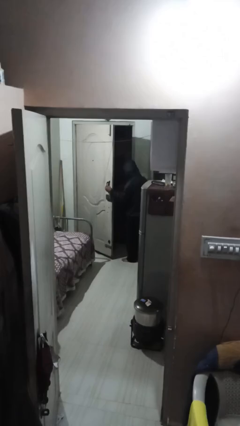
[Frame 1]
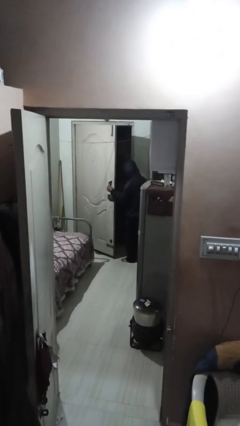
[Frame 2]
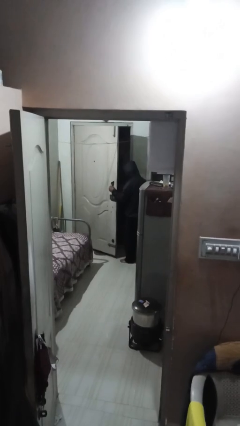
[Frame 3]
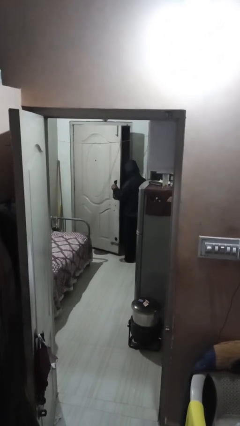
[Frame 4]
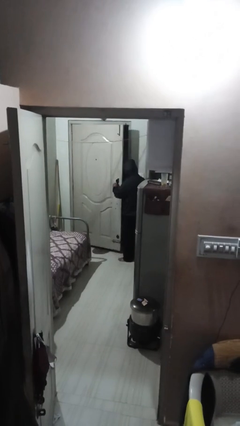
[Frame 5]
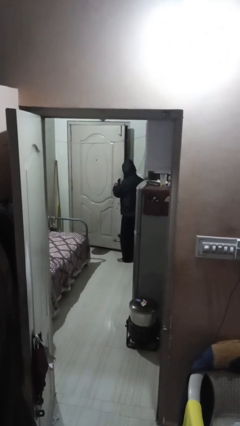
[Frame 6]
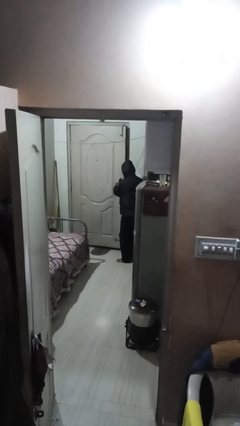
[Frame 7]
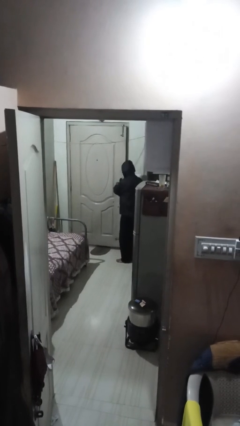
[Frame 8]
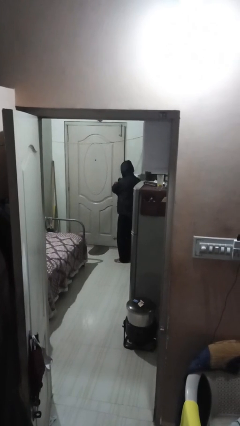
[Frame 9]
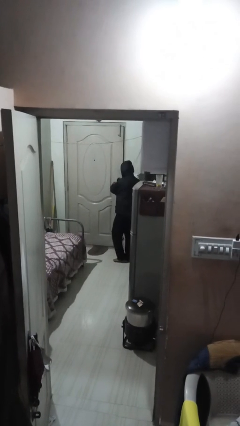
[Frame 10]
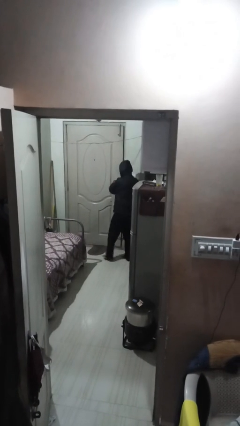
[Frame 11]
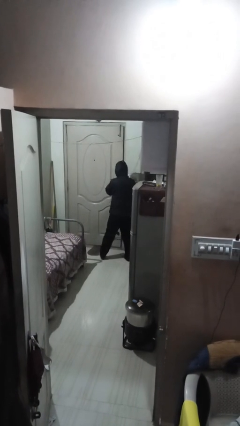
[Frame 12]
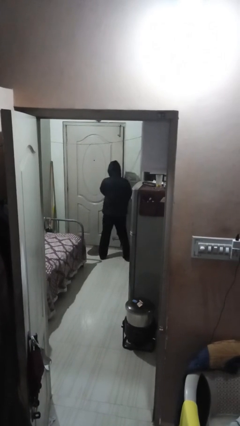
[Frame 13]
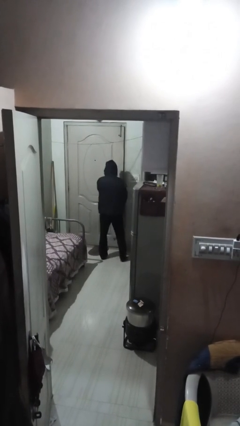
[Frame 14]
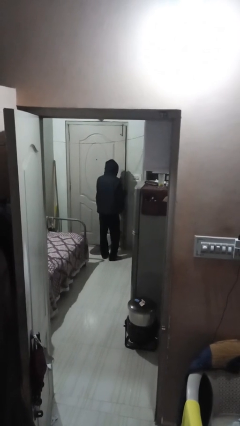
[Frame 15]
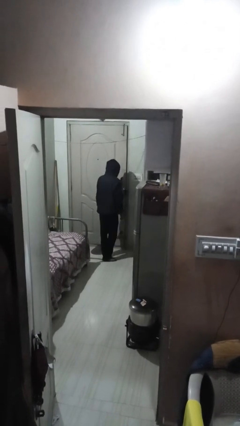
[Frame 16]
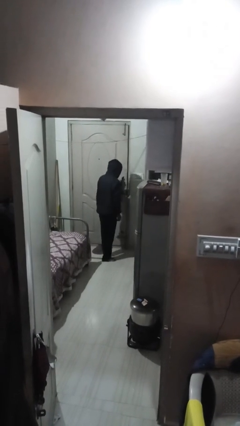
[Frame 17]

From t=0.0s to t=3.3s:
person closes facility door

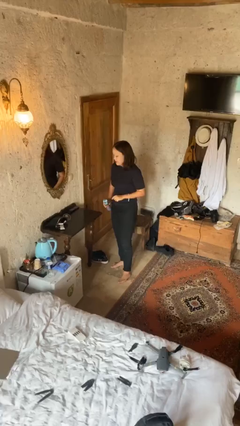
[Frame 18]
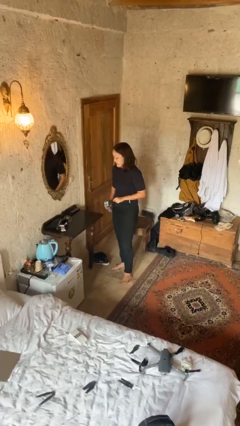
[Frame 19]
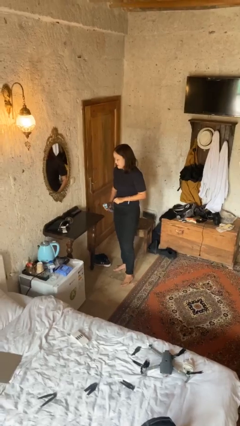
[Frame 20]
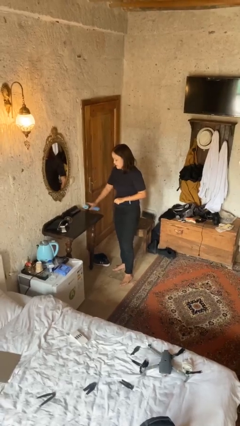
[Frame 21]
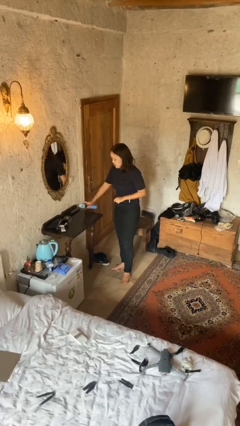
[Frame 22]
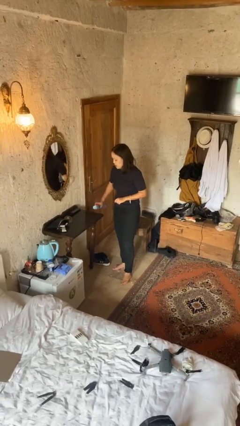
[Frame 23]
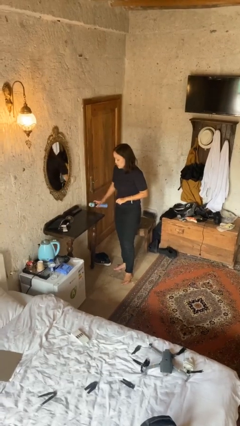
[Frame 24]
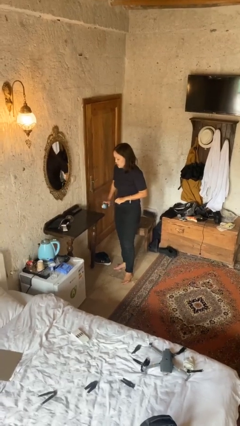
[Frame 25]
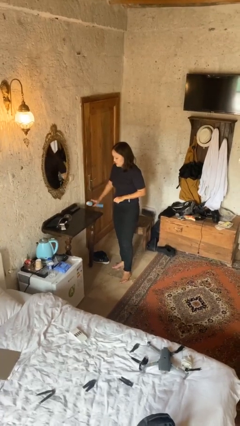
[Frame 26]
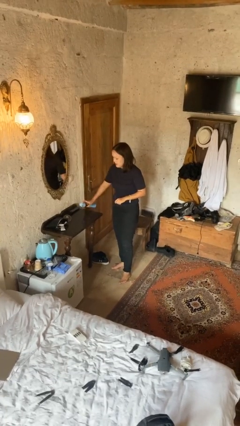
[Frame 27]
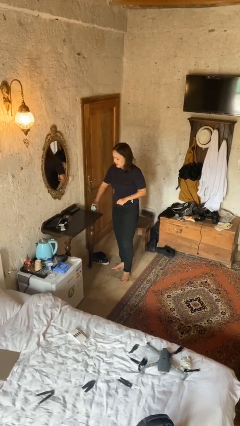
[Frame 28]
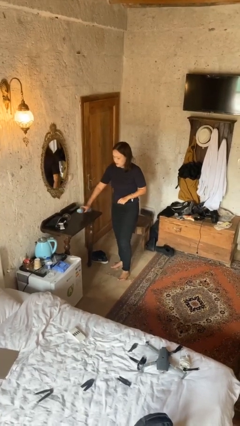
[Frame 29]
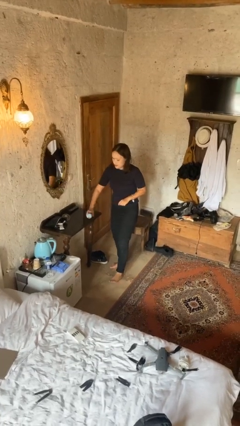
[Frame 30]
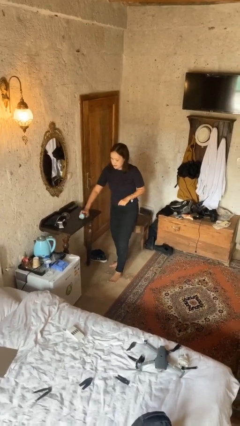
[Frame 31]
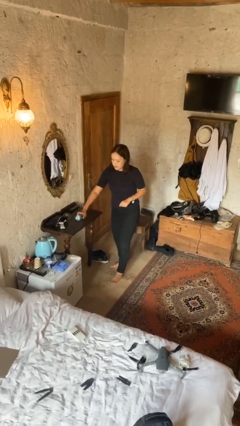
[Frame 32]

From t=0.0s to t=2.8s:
person sprays from bottle

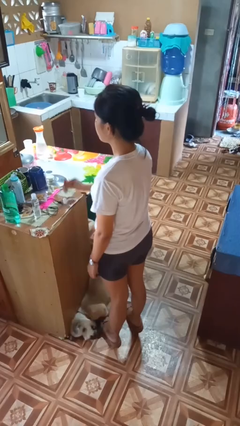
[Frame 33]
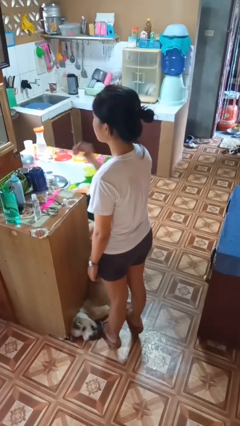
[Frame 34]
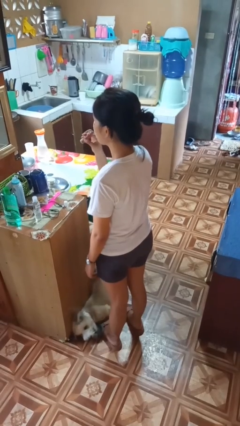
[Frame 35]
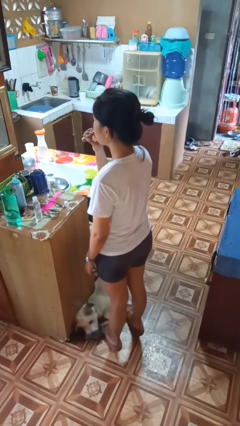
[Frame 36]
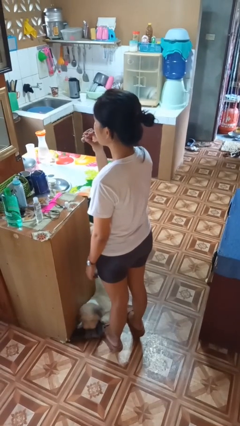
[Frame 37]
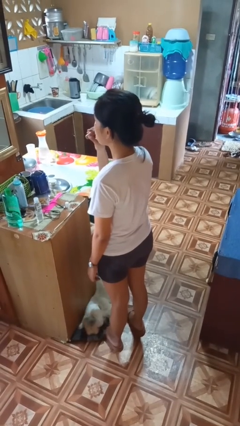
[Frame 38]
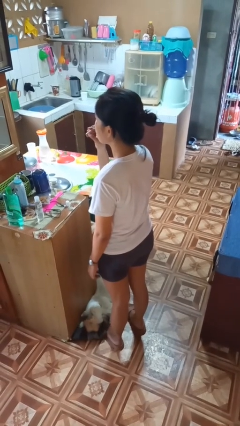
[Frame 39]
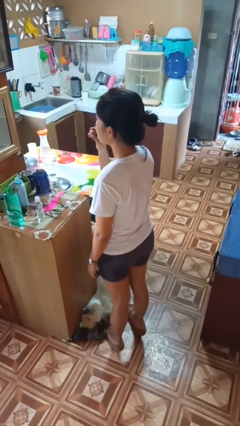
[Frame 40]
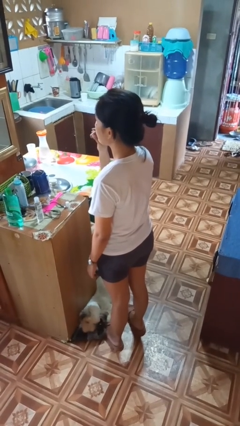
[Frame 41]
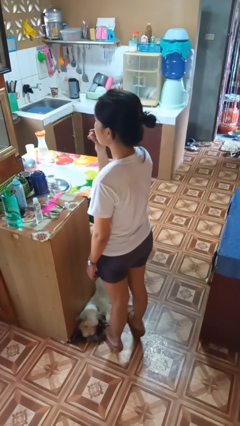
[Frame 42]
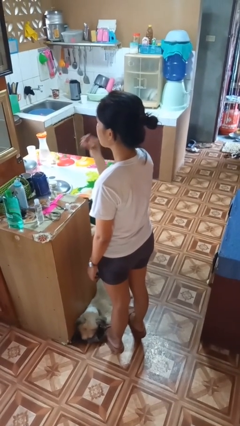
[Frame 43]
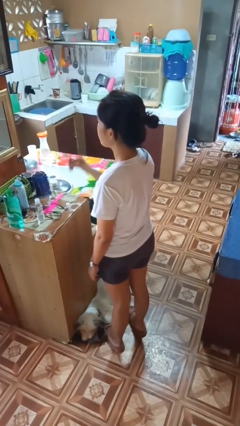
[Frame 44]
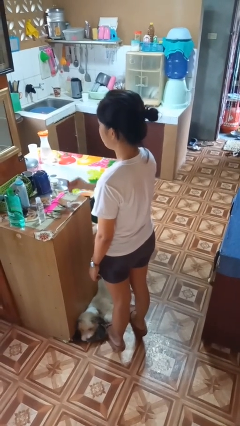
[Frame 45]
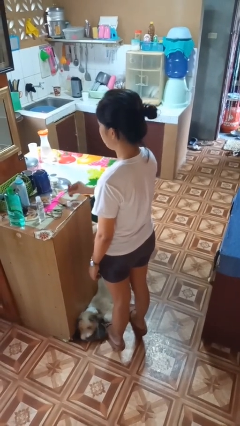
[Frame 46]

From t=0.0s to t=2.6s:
person applies lip makeup

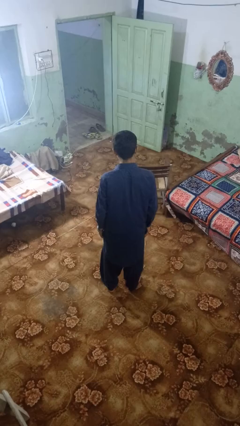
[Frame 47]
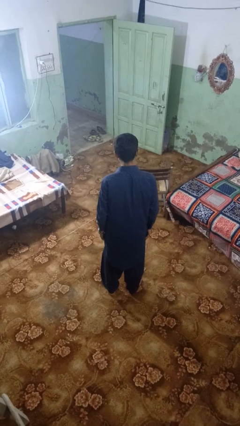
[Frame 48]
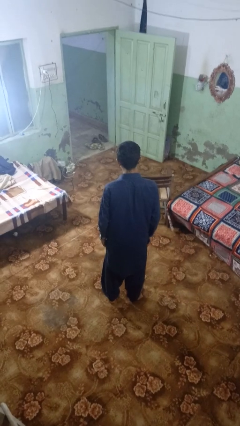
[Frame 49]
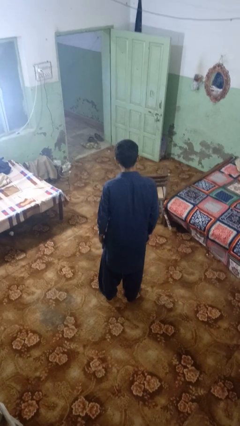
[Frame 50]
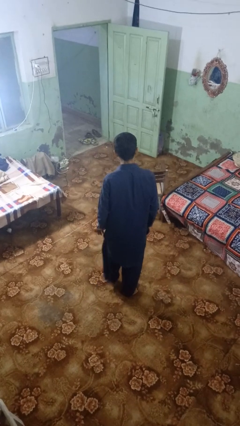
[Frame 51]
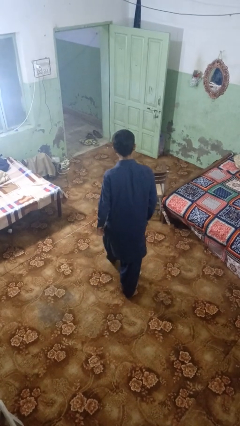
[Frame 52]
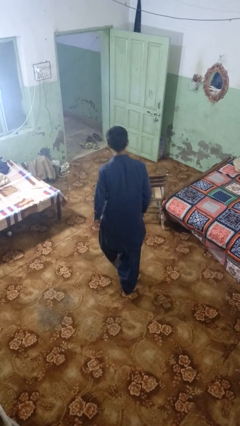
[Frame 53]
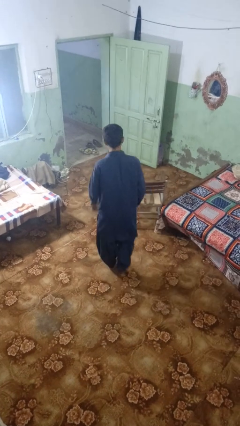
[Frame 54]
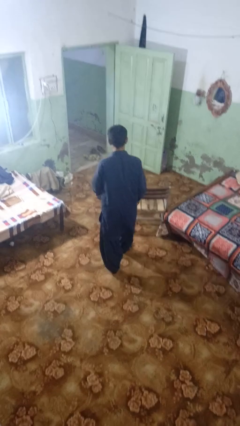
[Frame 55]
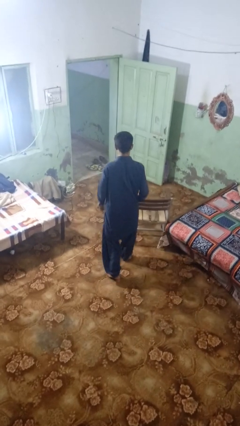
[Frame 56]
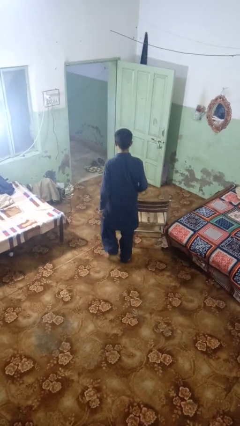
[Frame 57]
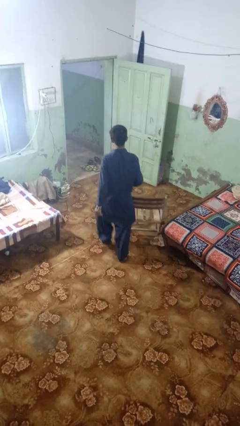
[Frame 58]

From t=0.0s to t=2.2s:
person trips on object on floor

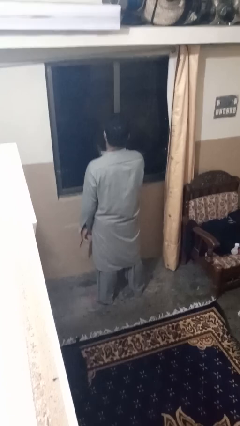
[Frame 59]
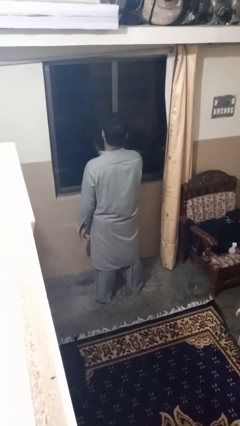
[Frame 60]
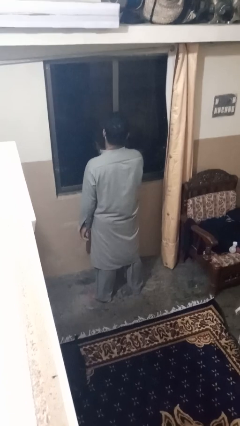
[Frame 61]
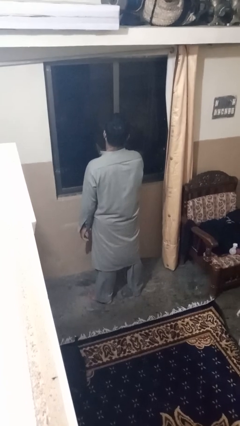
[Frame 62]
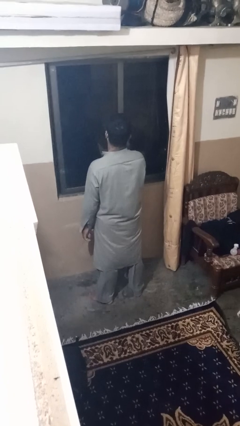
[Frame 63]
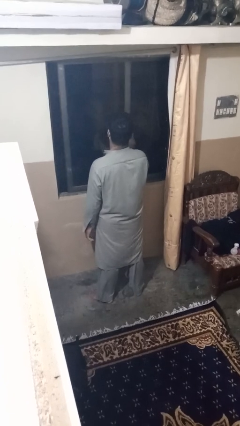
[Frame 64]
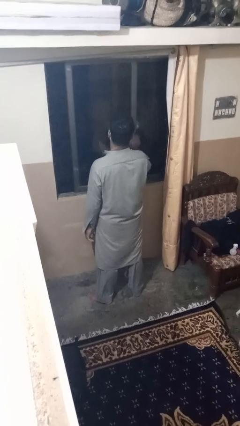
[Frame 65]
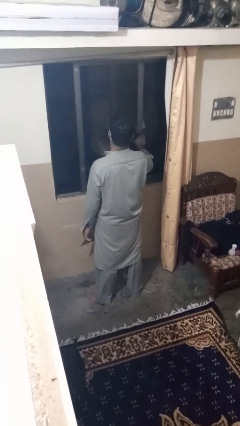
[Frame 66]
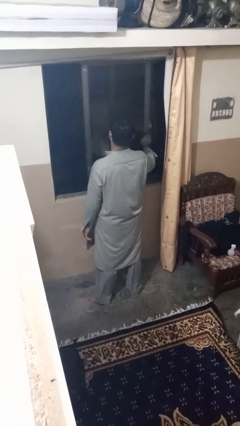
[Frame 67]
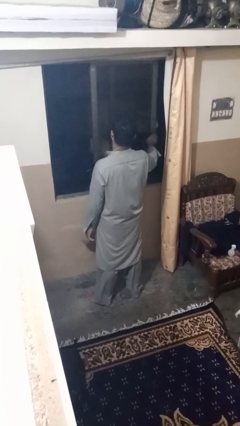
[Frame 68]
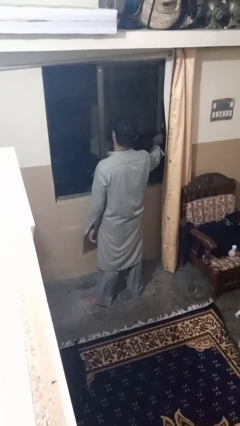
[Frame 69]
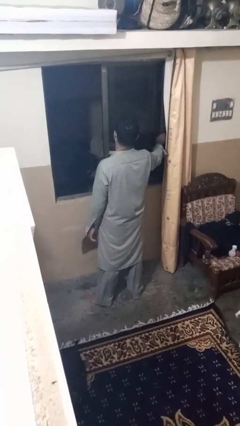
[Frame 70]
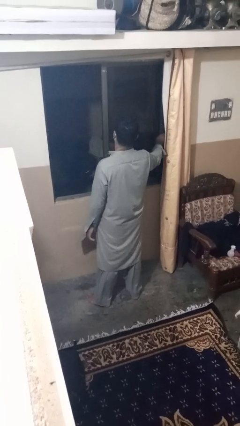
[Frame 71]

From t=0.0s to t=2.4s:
person opens home window

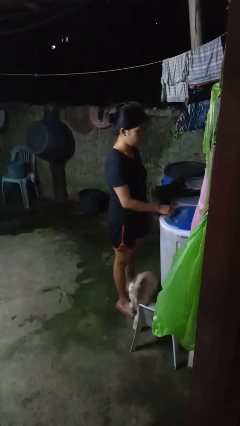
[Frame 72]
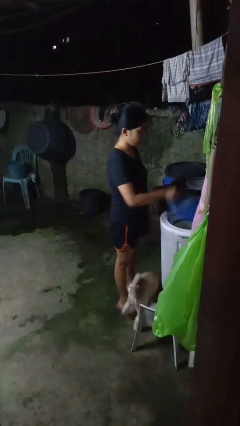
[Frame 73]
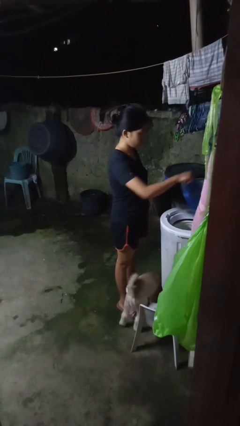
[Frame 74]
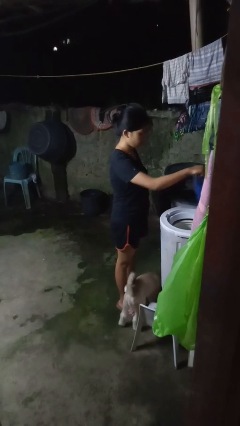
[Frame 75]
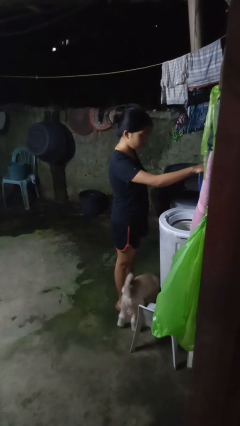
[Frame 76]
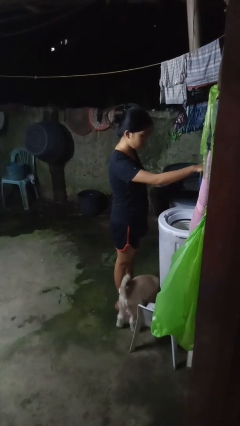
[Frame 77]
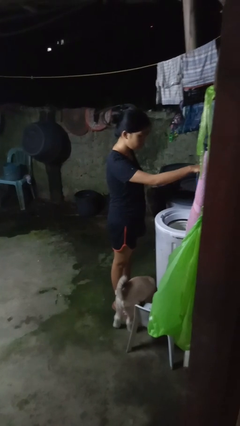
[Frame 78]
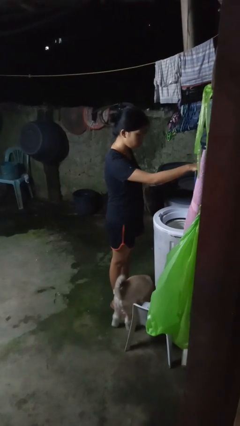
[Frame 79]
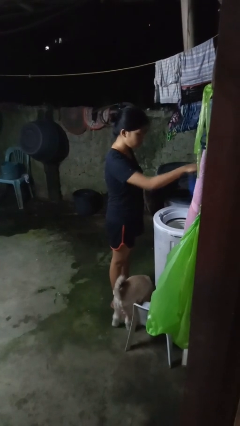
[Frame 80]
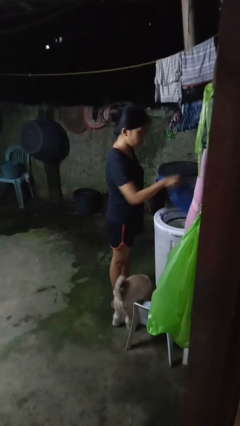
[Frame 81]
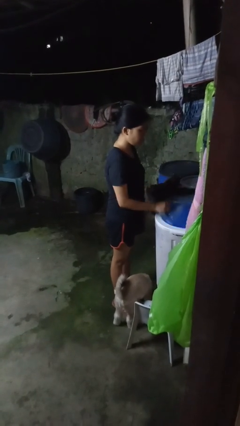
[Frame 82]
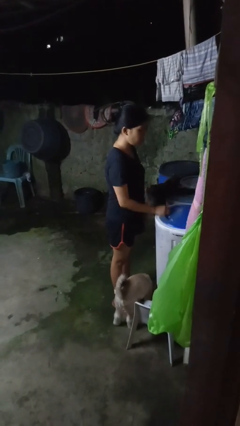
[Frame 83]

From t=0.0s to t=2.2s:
person opens clothes washer

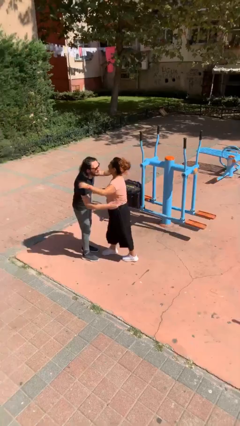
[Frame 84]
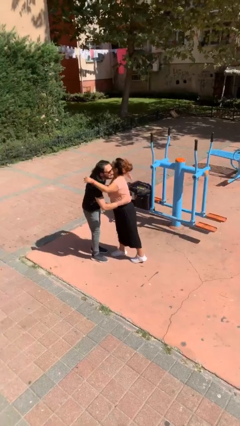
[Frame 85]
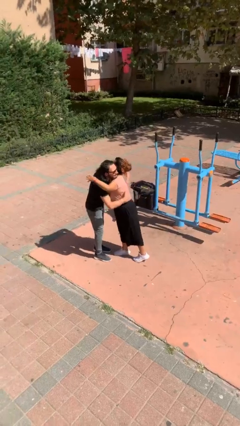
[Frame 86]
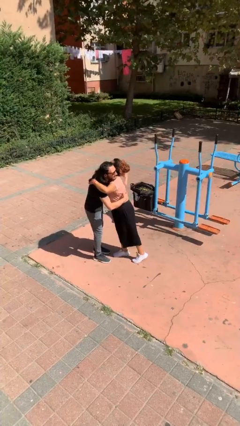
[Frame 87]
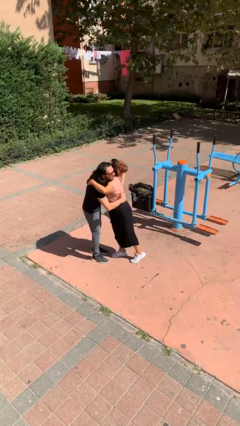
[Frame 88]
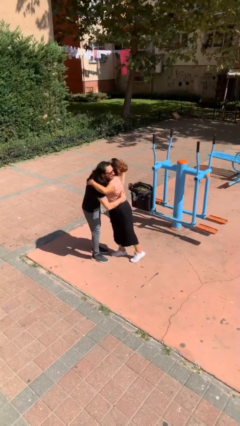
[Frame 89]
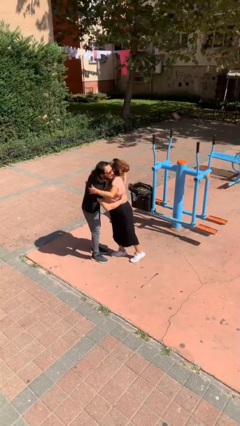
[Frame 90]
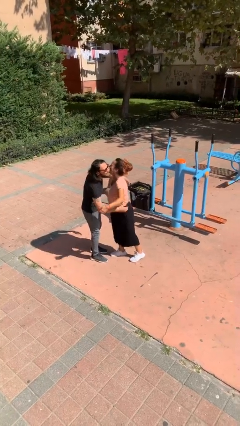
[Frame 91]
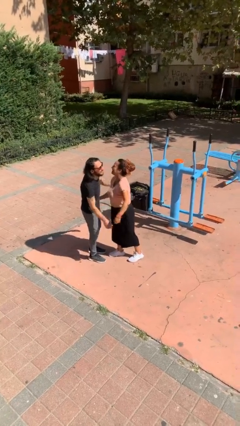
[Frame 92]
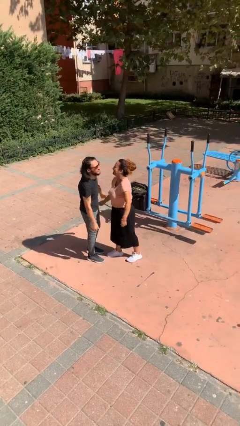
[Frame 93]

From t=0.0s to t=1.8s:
person embraces person
